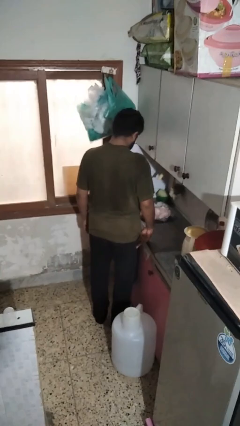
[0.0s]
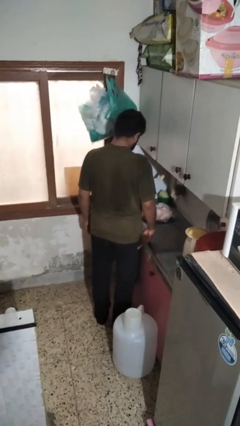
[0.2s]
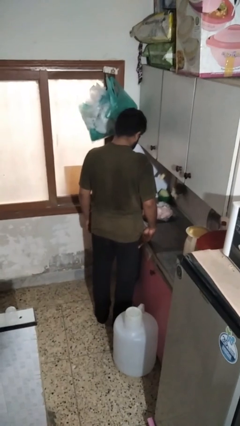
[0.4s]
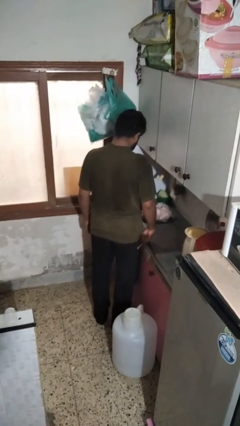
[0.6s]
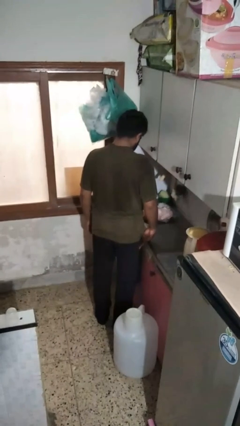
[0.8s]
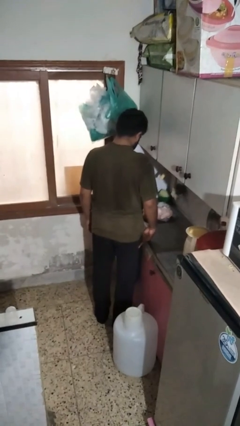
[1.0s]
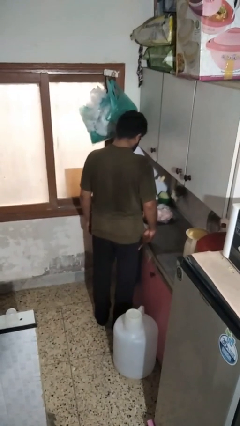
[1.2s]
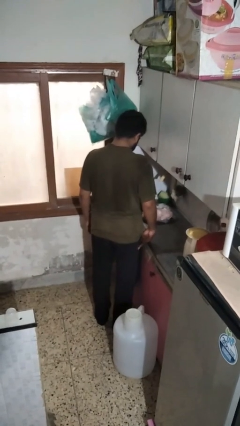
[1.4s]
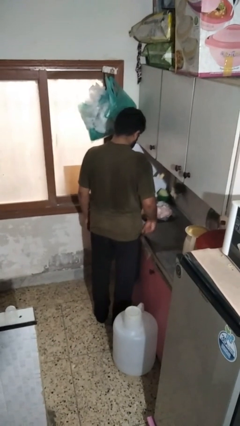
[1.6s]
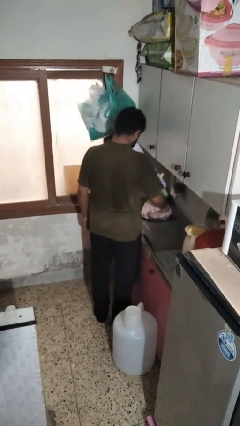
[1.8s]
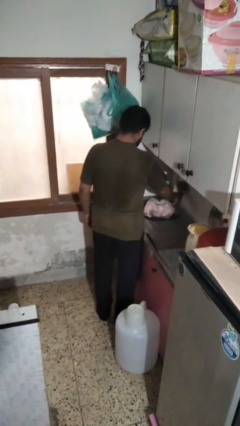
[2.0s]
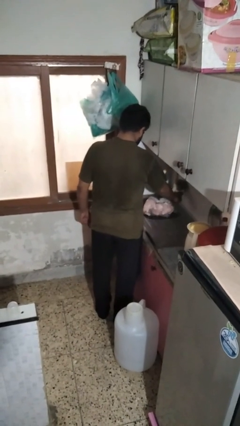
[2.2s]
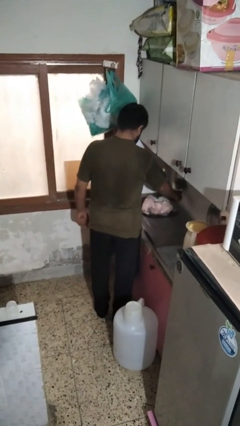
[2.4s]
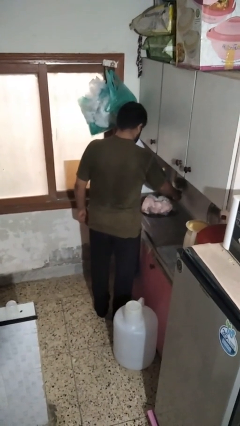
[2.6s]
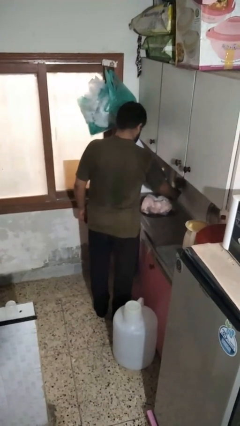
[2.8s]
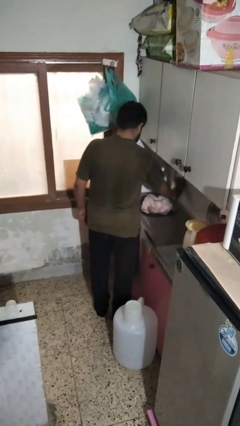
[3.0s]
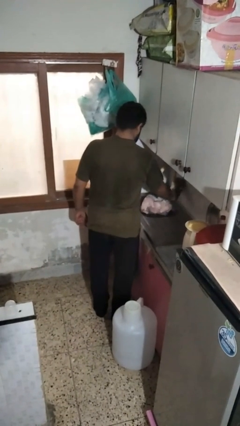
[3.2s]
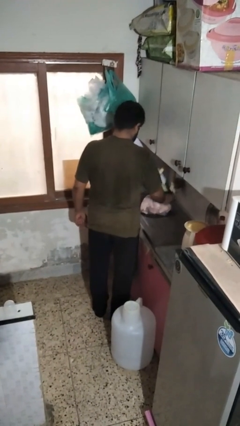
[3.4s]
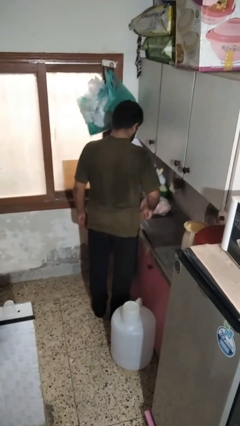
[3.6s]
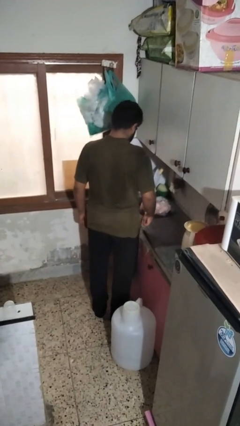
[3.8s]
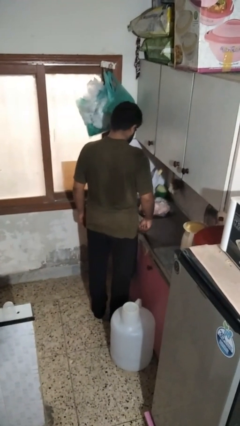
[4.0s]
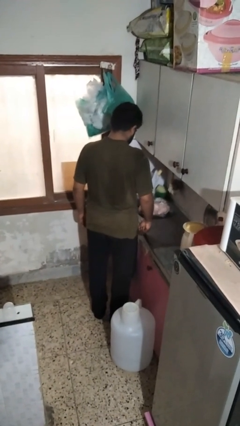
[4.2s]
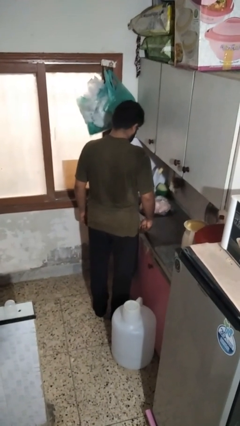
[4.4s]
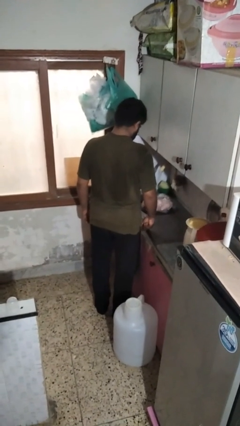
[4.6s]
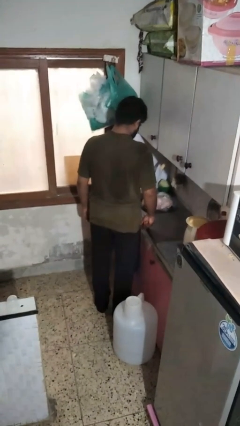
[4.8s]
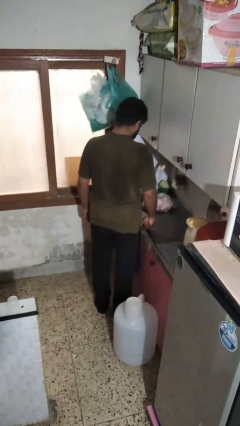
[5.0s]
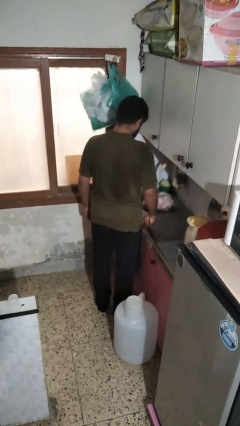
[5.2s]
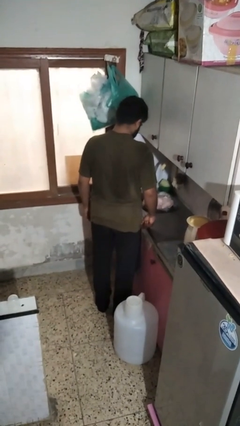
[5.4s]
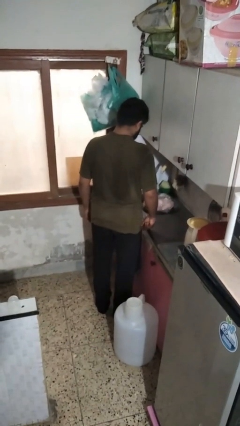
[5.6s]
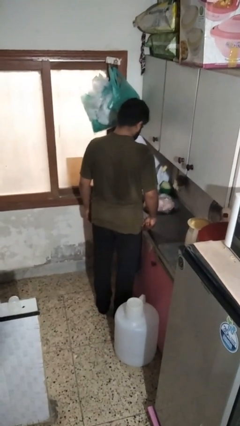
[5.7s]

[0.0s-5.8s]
person turns on faucet

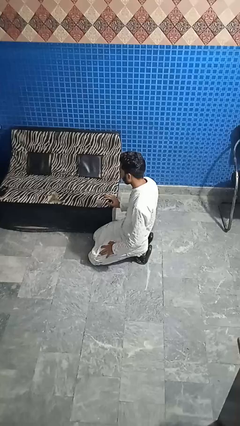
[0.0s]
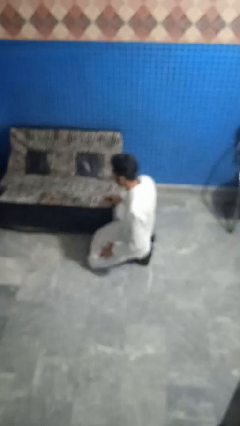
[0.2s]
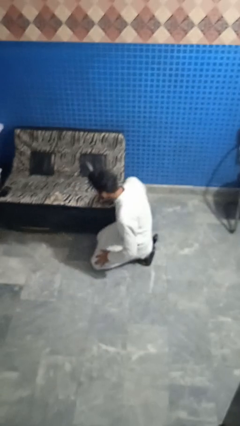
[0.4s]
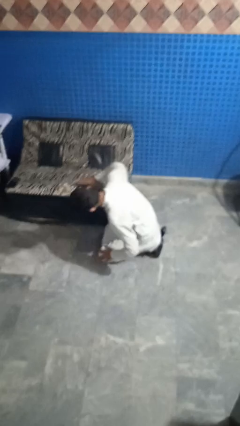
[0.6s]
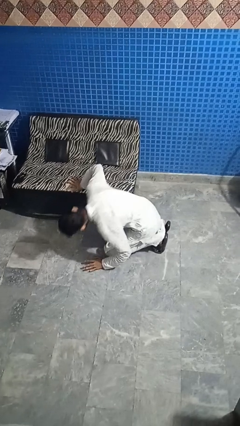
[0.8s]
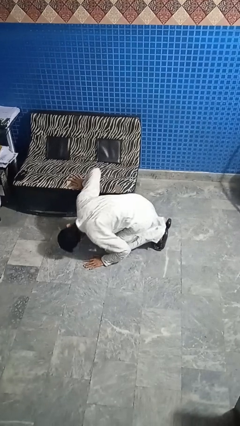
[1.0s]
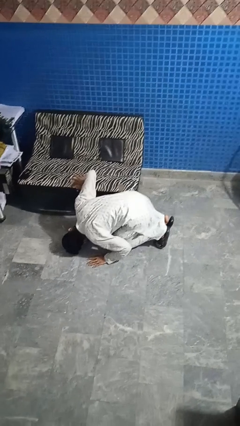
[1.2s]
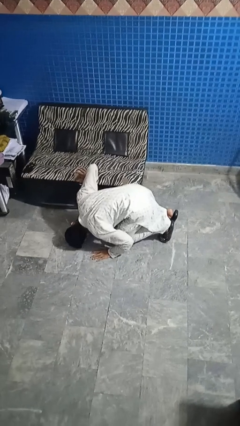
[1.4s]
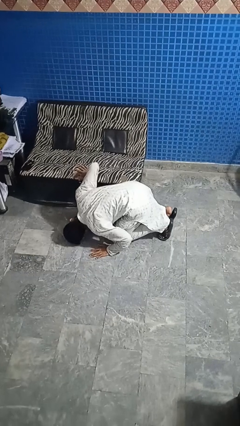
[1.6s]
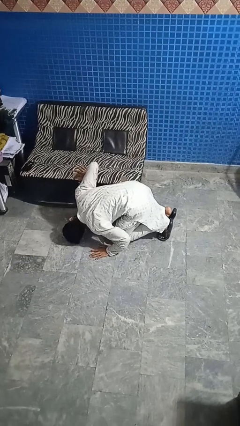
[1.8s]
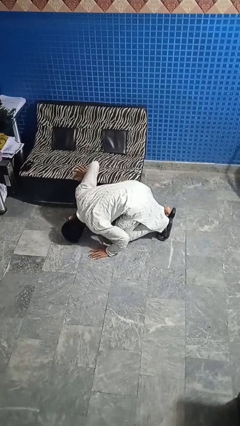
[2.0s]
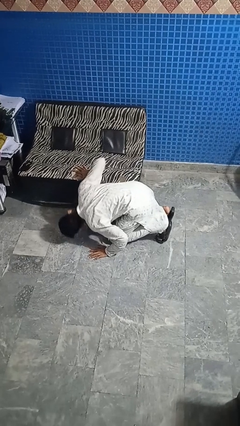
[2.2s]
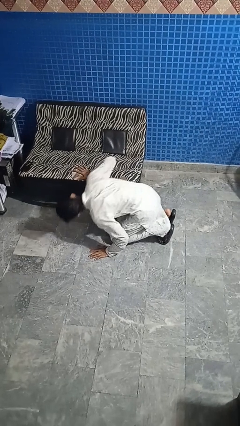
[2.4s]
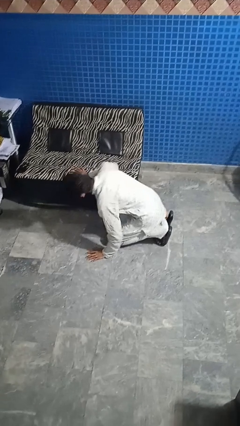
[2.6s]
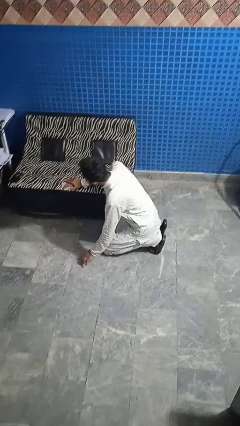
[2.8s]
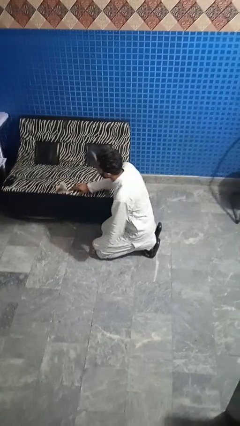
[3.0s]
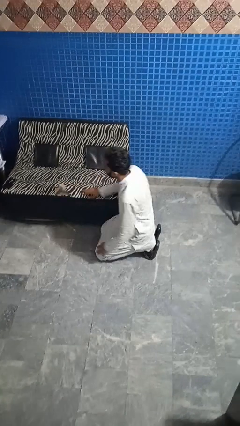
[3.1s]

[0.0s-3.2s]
person searches under couch

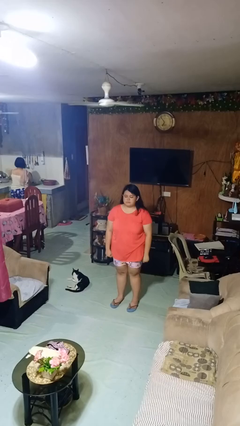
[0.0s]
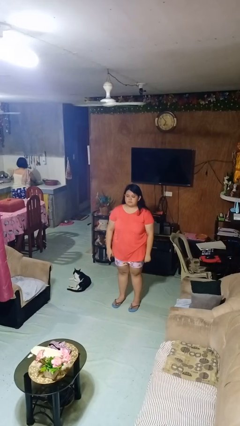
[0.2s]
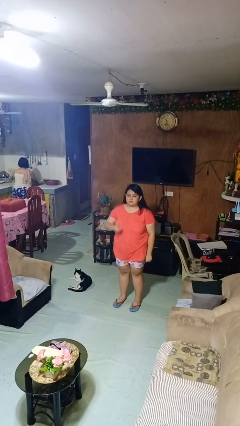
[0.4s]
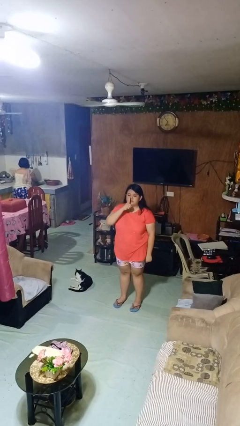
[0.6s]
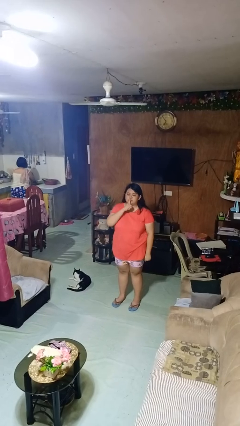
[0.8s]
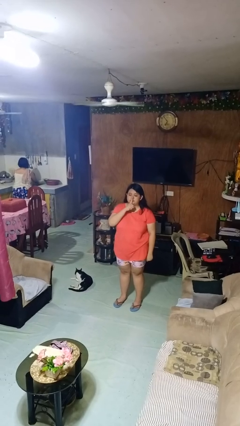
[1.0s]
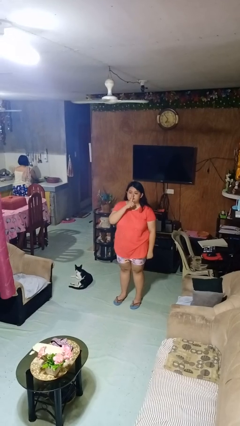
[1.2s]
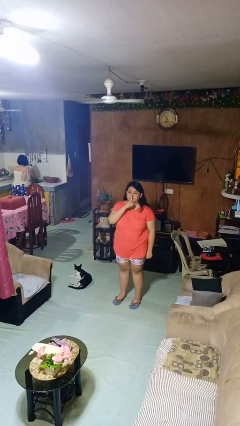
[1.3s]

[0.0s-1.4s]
person gestures be quiet

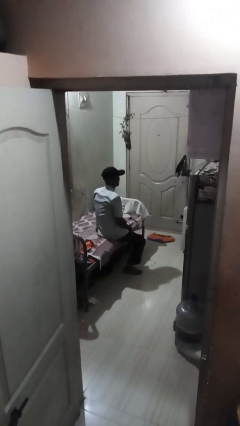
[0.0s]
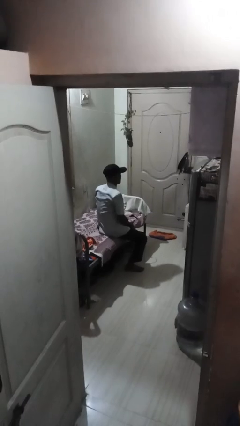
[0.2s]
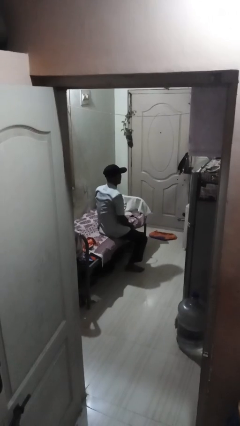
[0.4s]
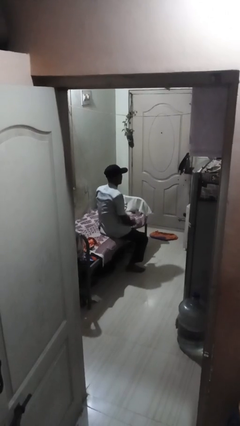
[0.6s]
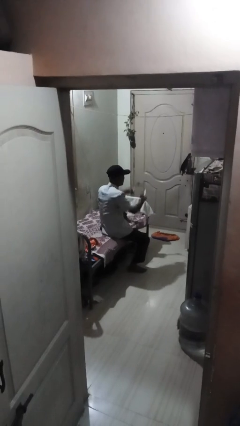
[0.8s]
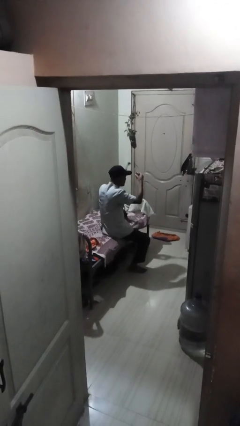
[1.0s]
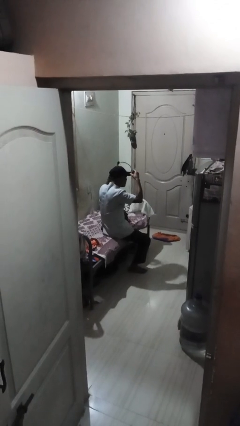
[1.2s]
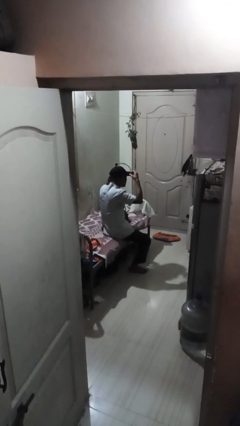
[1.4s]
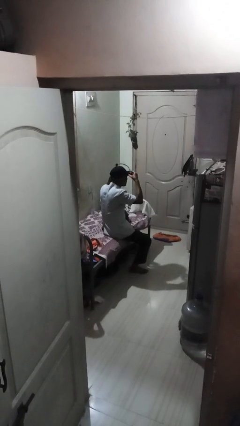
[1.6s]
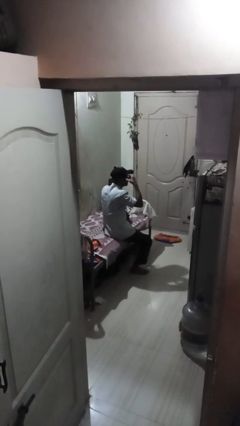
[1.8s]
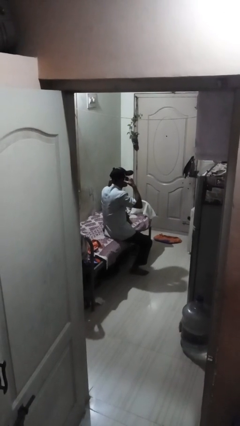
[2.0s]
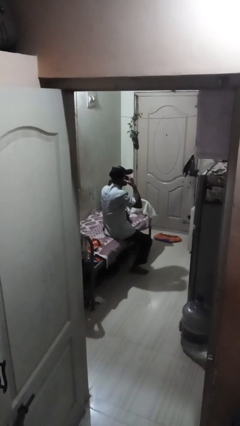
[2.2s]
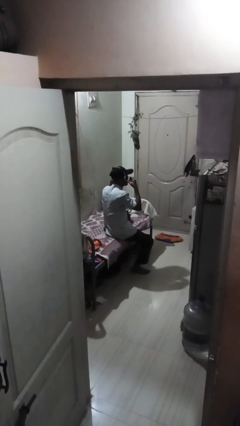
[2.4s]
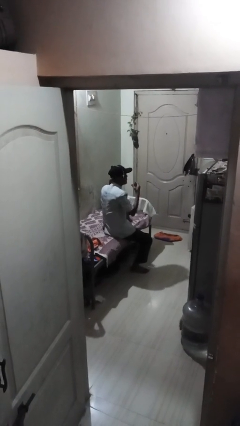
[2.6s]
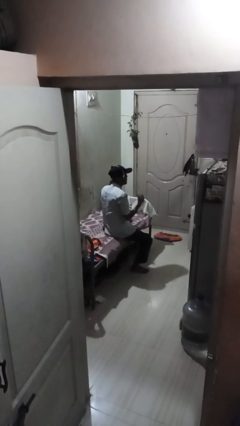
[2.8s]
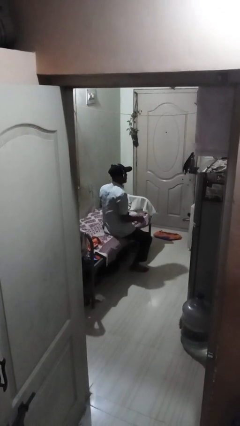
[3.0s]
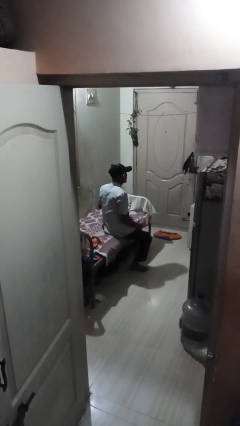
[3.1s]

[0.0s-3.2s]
person puts on headphones

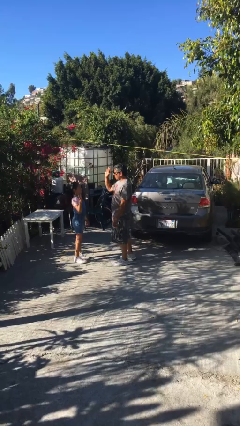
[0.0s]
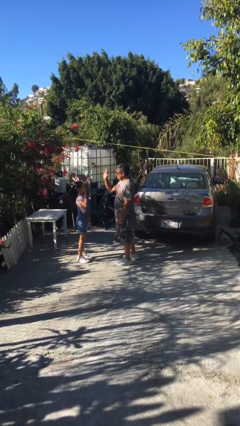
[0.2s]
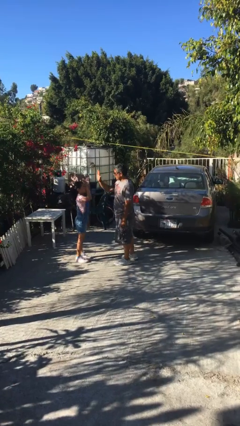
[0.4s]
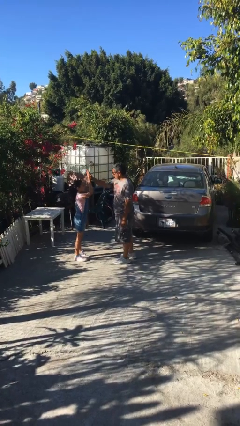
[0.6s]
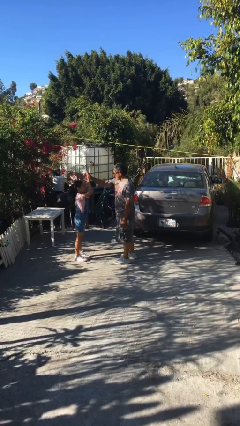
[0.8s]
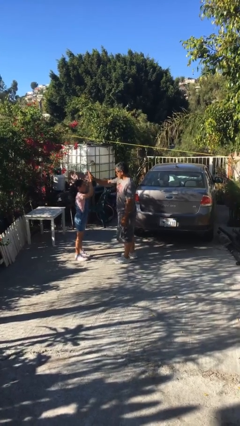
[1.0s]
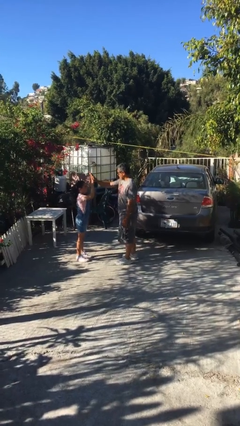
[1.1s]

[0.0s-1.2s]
person highfives hand

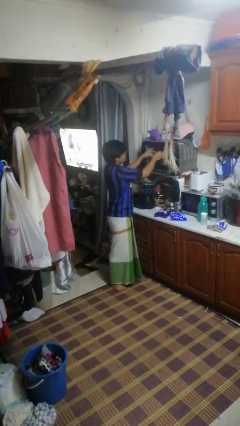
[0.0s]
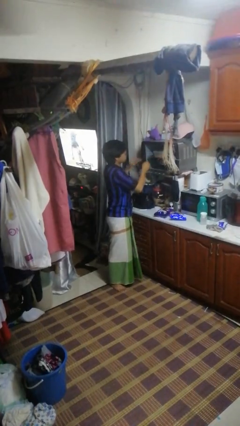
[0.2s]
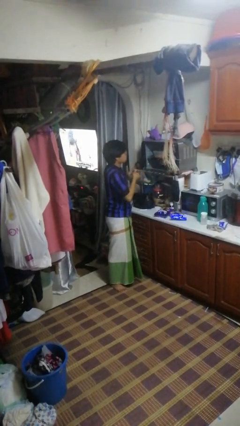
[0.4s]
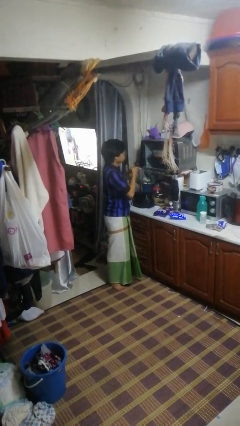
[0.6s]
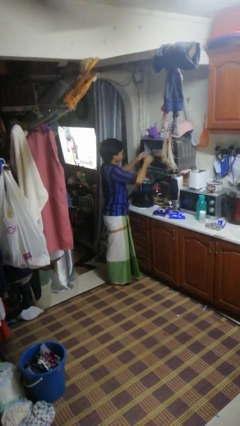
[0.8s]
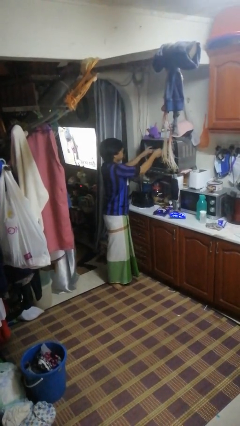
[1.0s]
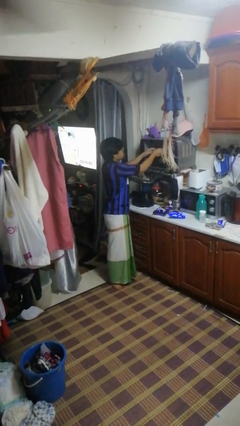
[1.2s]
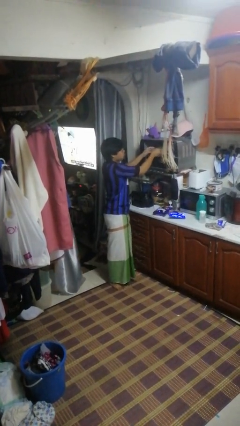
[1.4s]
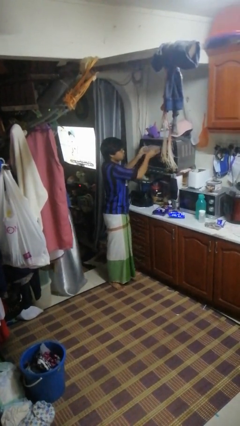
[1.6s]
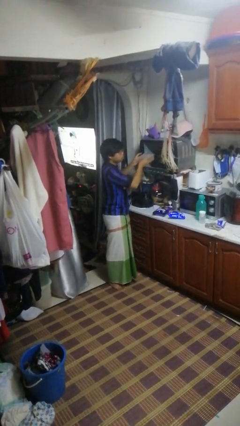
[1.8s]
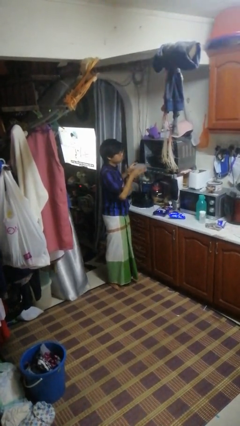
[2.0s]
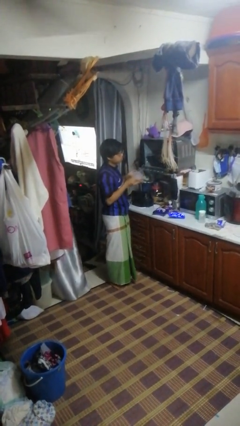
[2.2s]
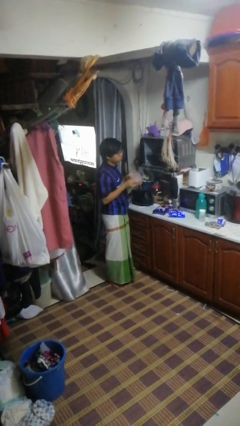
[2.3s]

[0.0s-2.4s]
person takes object from oven

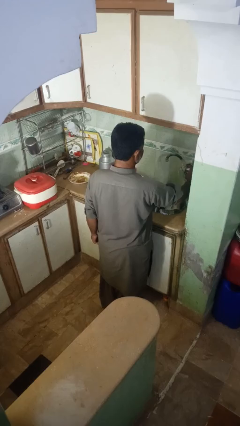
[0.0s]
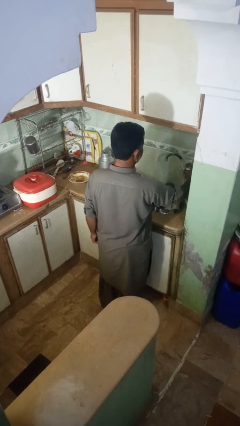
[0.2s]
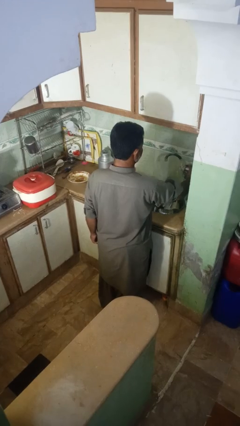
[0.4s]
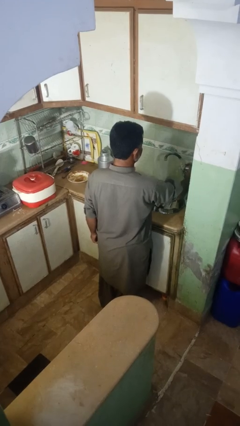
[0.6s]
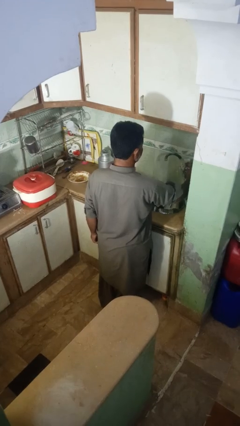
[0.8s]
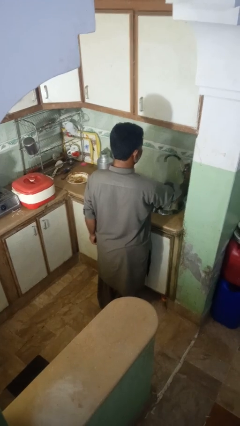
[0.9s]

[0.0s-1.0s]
person turns off faucet
